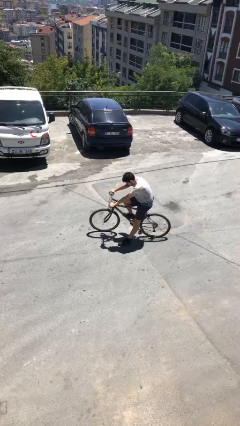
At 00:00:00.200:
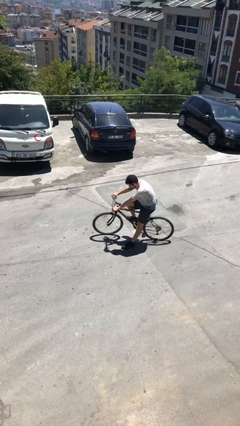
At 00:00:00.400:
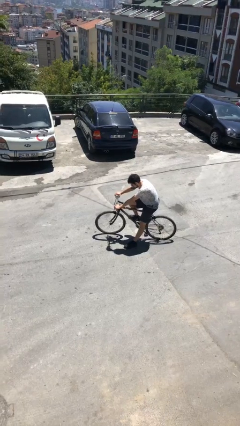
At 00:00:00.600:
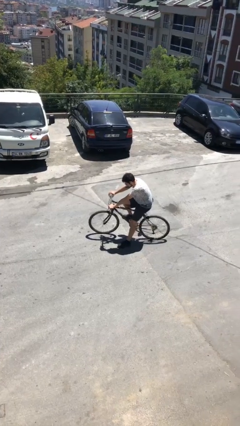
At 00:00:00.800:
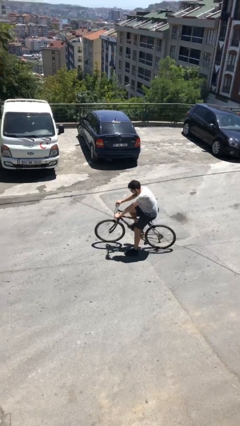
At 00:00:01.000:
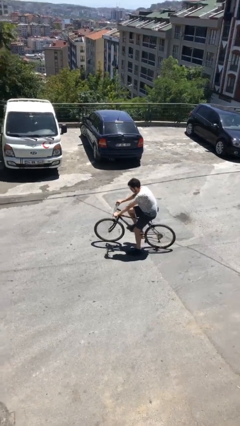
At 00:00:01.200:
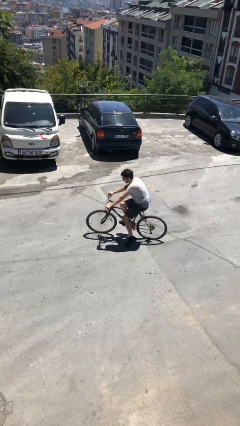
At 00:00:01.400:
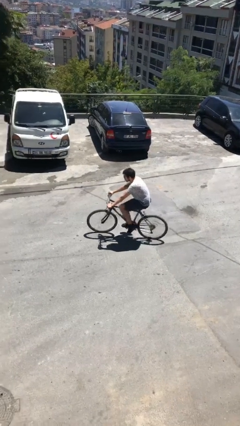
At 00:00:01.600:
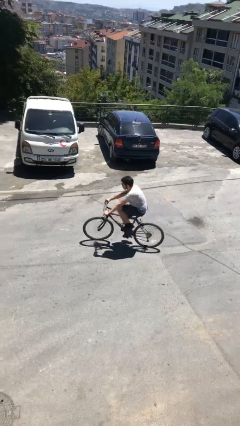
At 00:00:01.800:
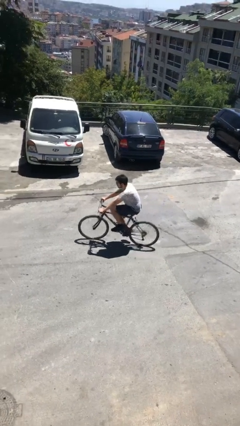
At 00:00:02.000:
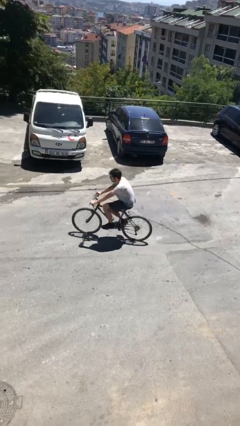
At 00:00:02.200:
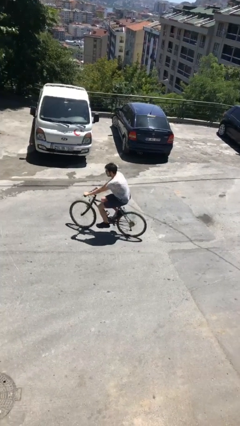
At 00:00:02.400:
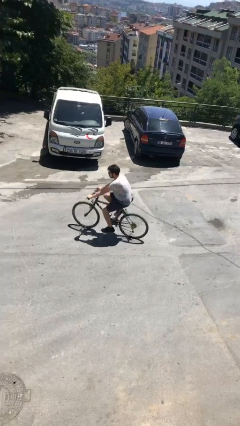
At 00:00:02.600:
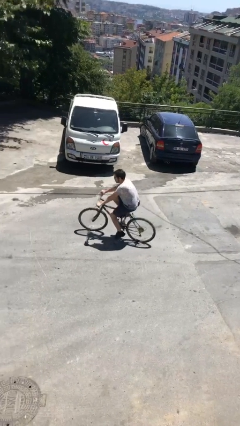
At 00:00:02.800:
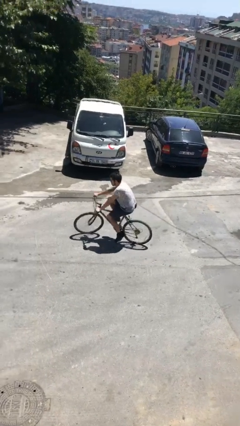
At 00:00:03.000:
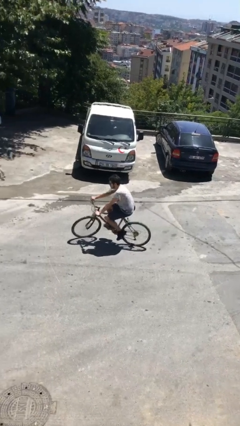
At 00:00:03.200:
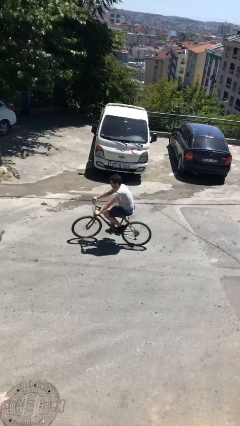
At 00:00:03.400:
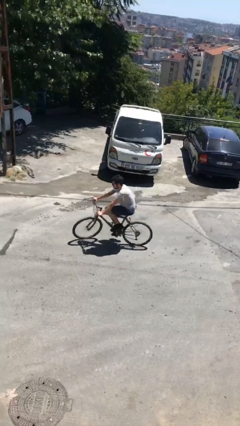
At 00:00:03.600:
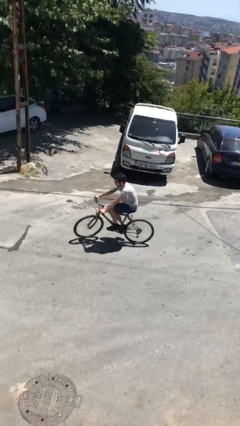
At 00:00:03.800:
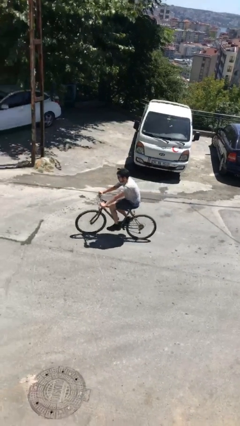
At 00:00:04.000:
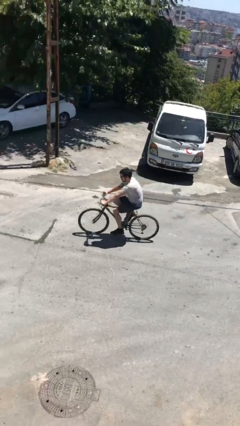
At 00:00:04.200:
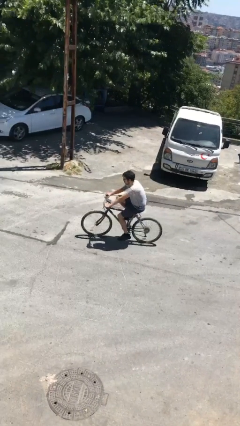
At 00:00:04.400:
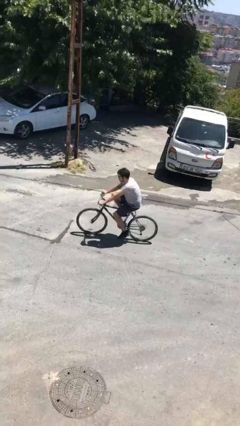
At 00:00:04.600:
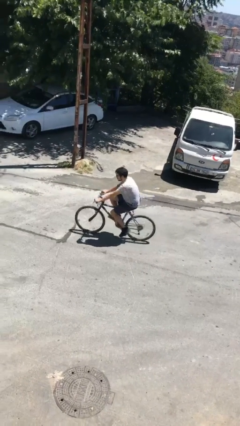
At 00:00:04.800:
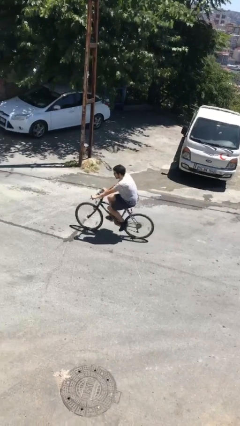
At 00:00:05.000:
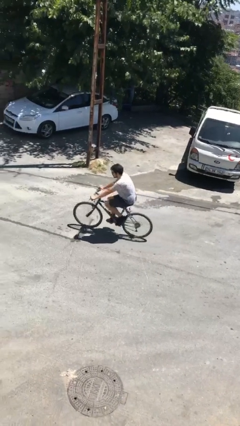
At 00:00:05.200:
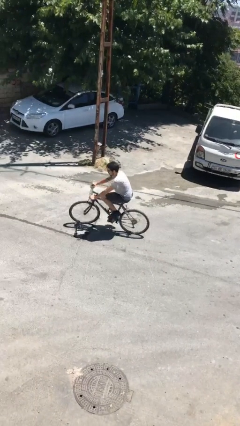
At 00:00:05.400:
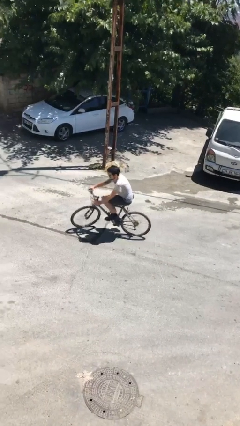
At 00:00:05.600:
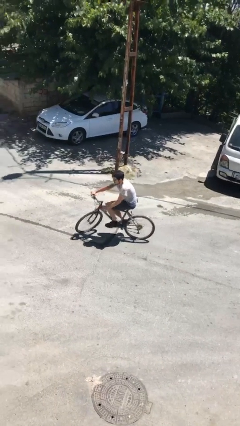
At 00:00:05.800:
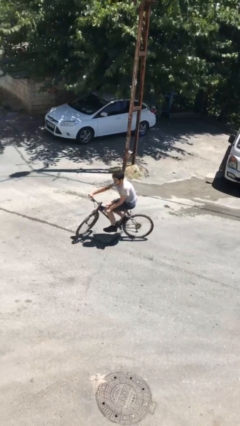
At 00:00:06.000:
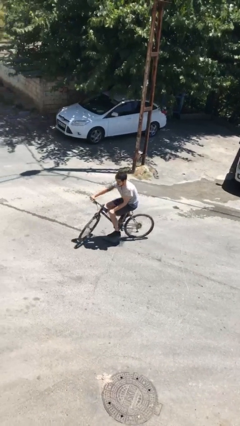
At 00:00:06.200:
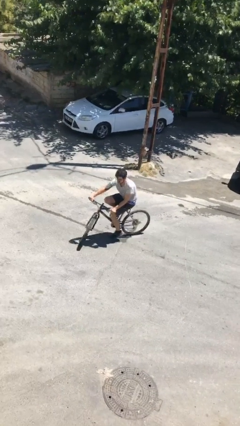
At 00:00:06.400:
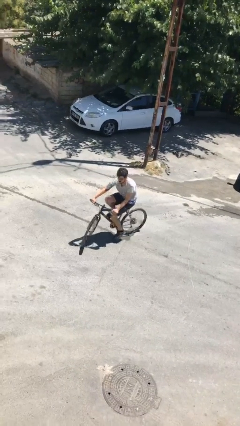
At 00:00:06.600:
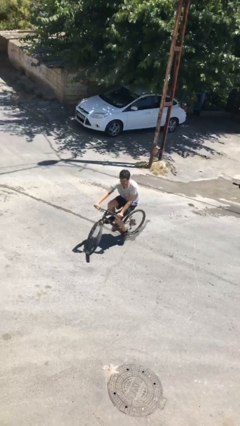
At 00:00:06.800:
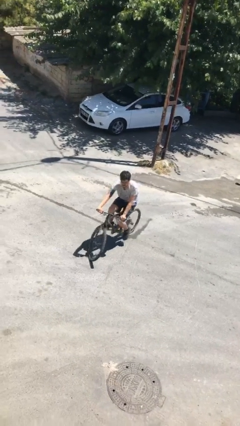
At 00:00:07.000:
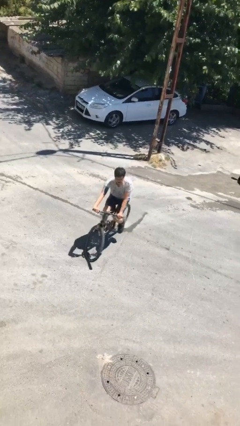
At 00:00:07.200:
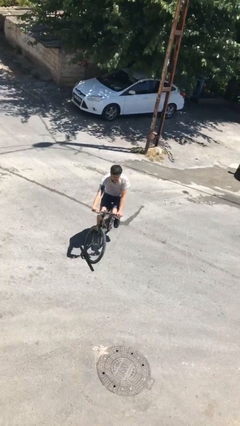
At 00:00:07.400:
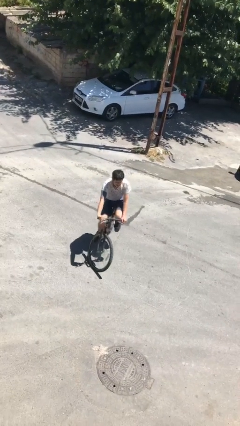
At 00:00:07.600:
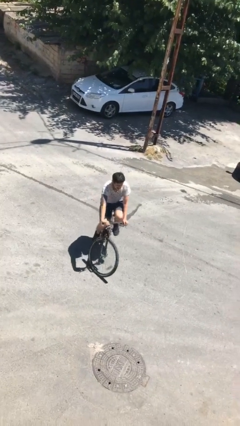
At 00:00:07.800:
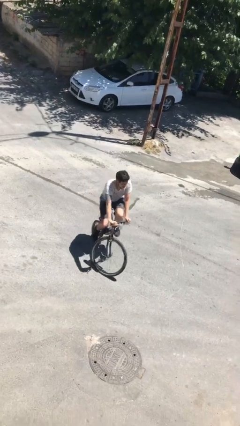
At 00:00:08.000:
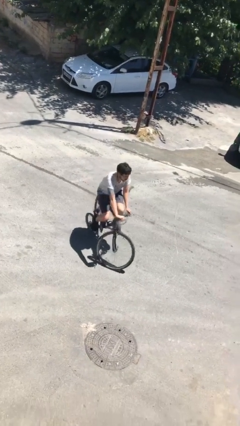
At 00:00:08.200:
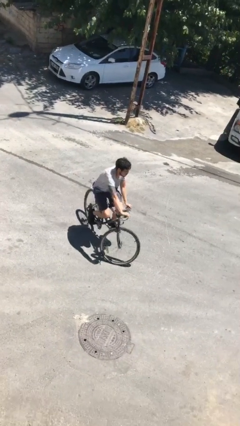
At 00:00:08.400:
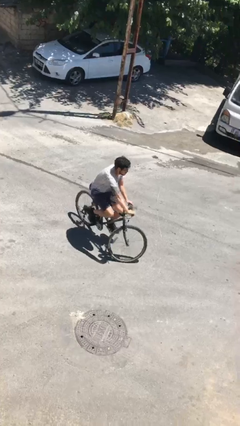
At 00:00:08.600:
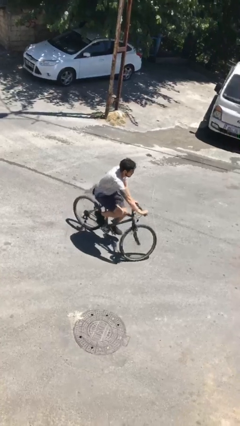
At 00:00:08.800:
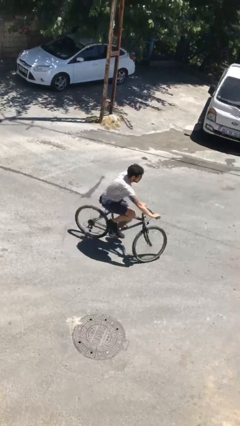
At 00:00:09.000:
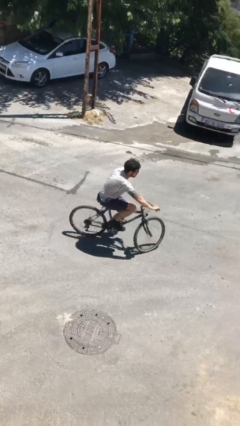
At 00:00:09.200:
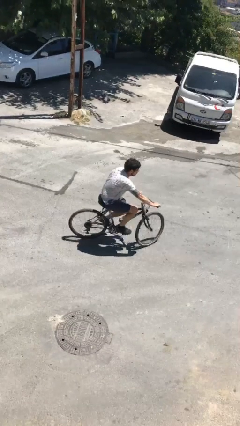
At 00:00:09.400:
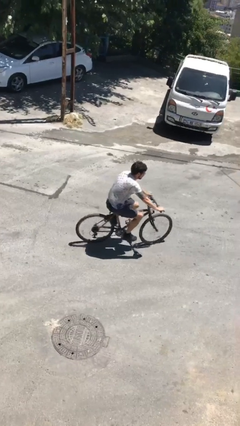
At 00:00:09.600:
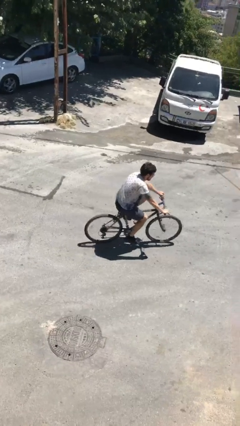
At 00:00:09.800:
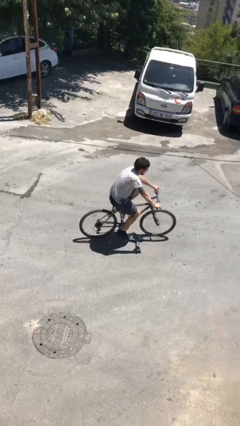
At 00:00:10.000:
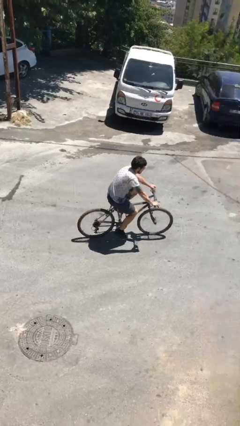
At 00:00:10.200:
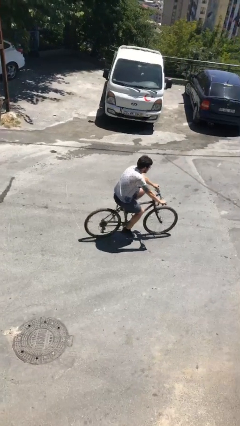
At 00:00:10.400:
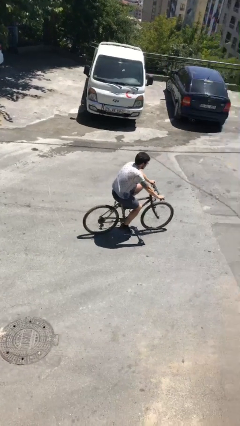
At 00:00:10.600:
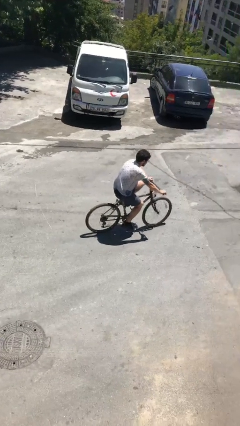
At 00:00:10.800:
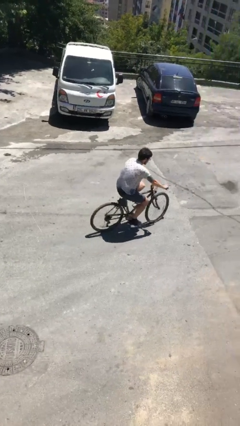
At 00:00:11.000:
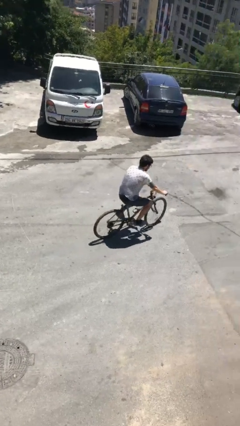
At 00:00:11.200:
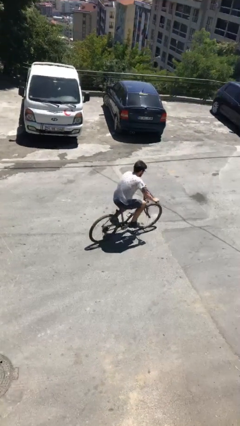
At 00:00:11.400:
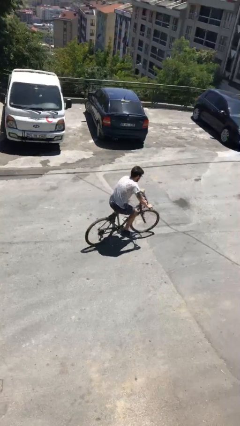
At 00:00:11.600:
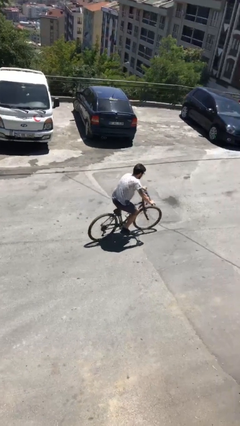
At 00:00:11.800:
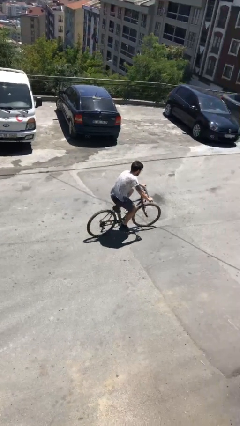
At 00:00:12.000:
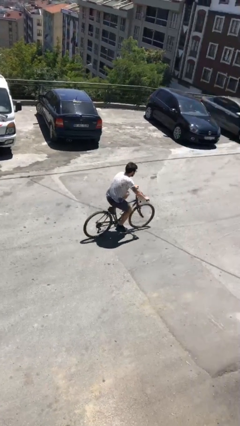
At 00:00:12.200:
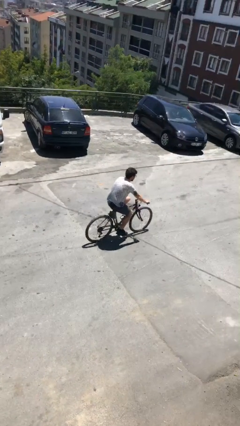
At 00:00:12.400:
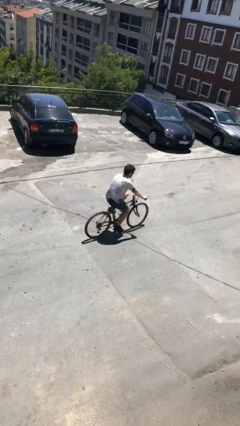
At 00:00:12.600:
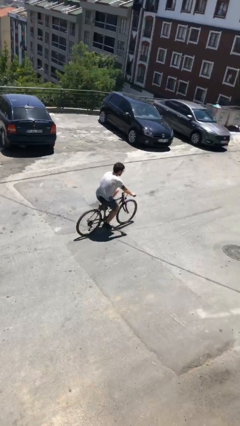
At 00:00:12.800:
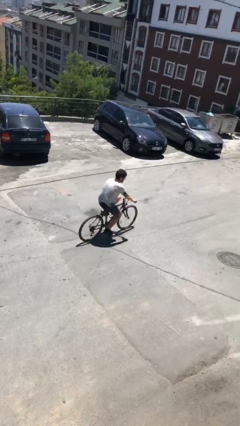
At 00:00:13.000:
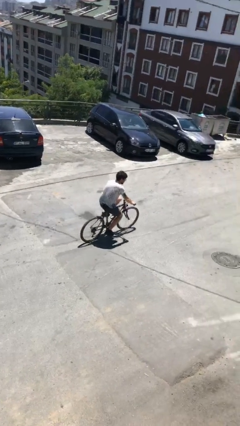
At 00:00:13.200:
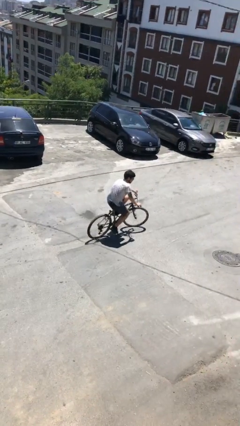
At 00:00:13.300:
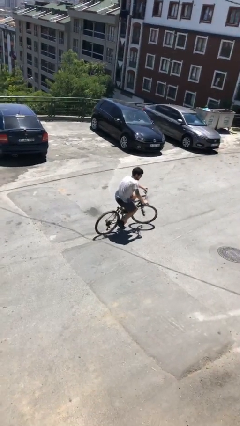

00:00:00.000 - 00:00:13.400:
person rides bicycle

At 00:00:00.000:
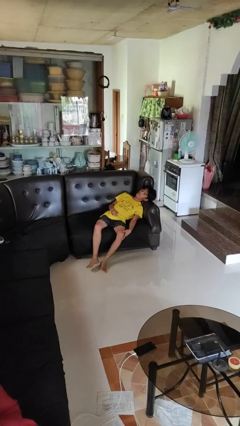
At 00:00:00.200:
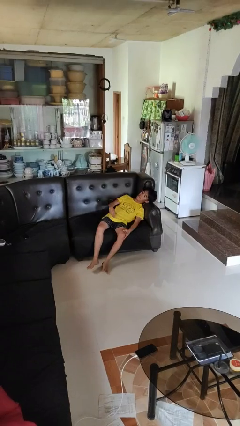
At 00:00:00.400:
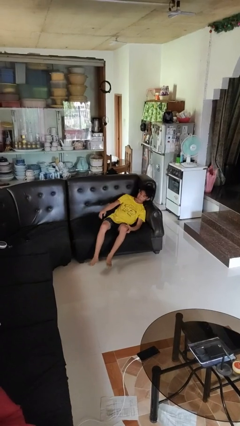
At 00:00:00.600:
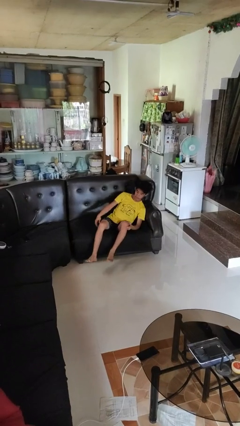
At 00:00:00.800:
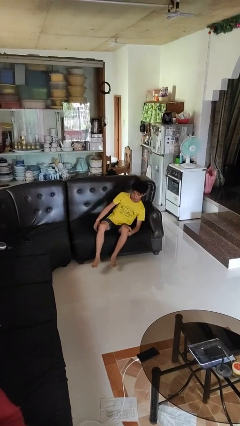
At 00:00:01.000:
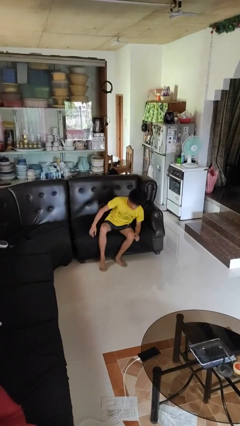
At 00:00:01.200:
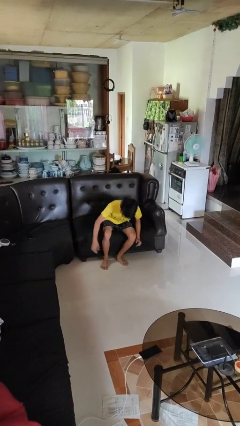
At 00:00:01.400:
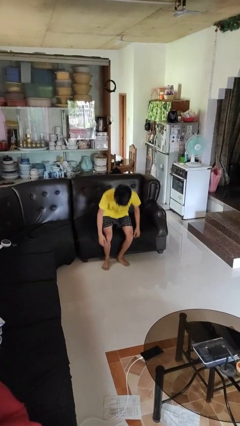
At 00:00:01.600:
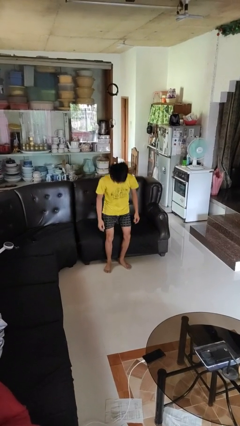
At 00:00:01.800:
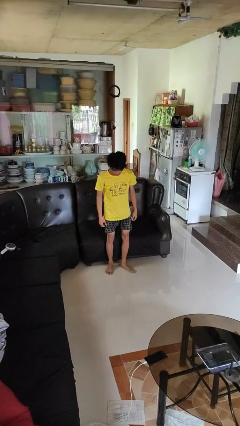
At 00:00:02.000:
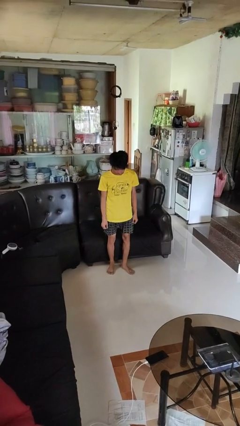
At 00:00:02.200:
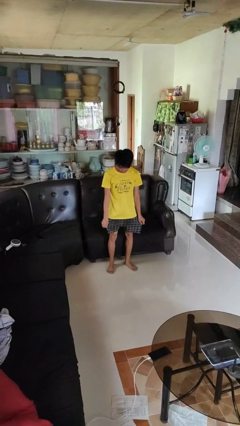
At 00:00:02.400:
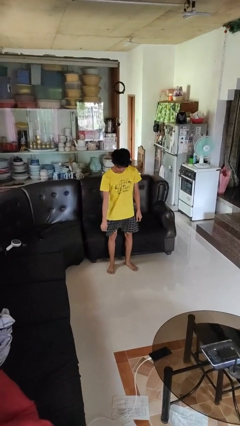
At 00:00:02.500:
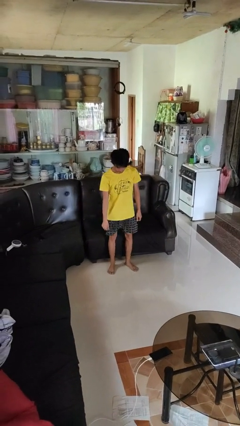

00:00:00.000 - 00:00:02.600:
person stands up

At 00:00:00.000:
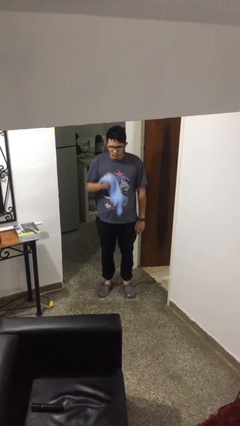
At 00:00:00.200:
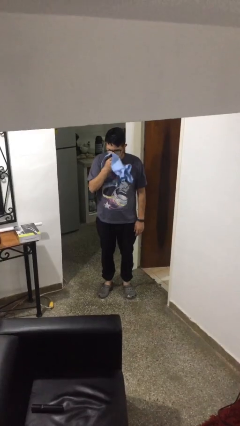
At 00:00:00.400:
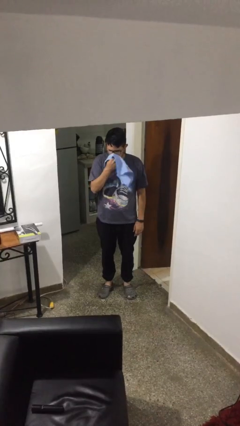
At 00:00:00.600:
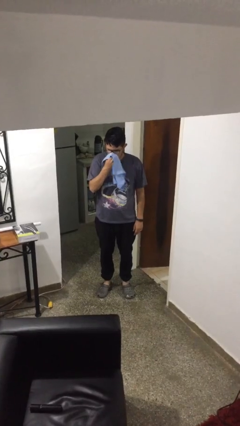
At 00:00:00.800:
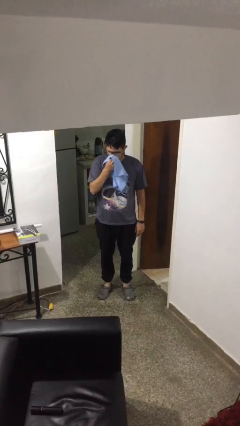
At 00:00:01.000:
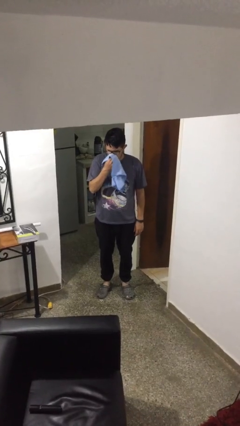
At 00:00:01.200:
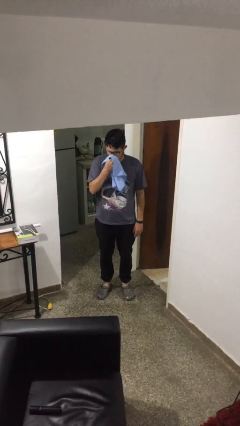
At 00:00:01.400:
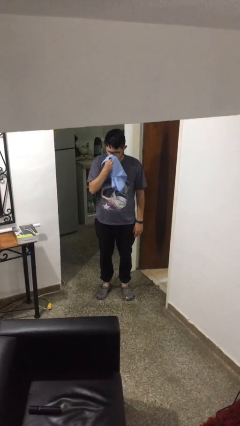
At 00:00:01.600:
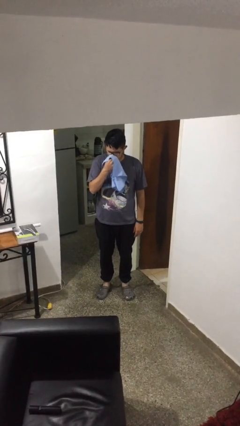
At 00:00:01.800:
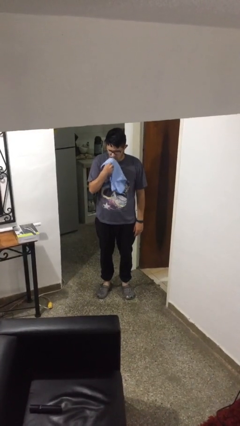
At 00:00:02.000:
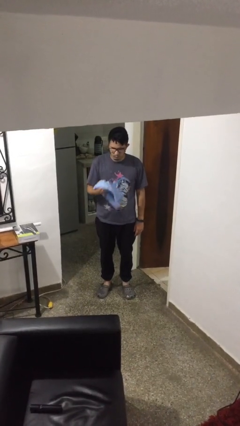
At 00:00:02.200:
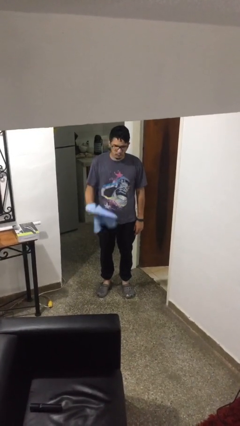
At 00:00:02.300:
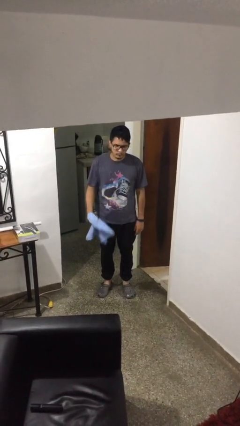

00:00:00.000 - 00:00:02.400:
person blows nose
